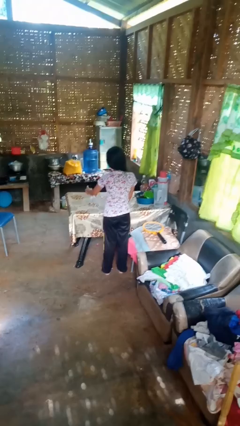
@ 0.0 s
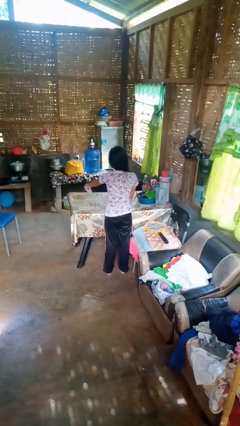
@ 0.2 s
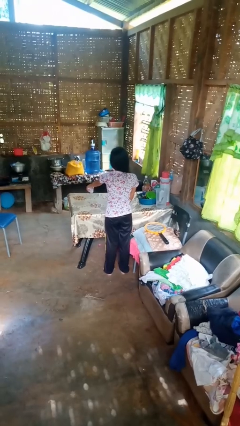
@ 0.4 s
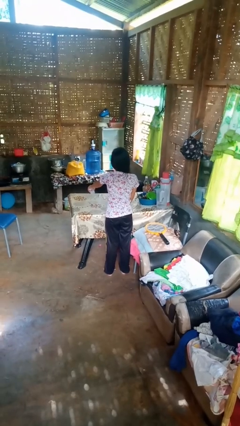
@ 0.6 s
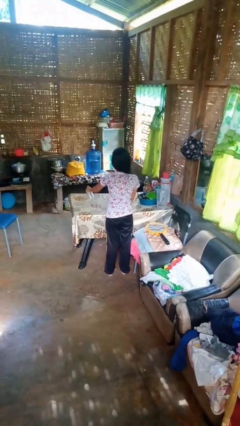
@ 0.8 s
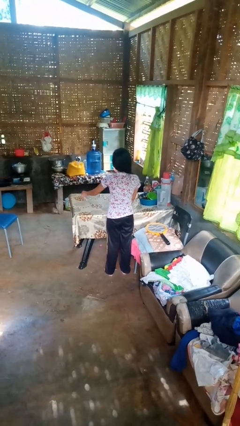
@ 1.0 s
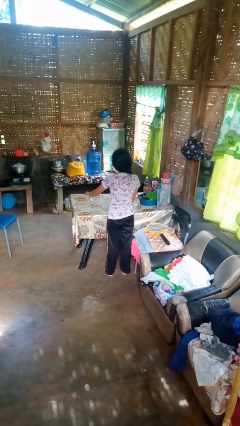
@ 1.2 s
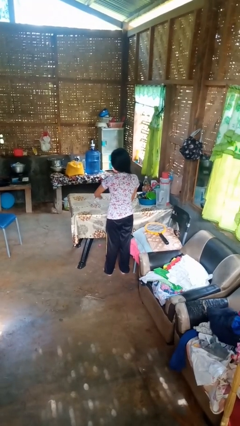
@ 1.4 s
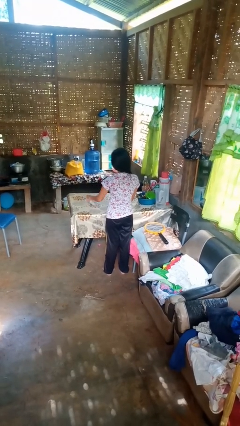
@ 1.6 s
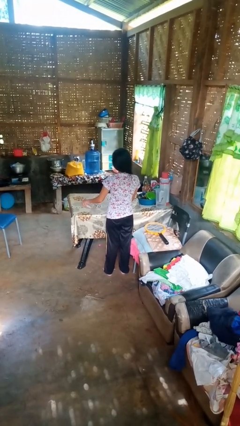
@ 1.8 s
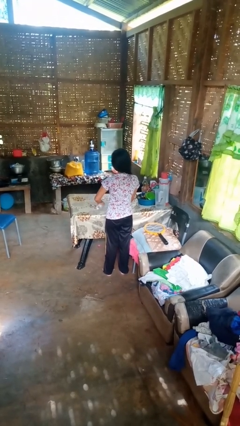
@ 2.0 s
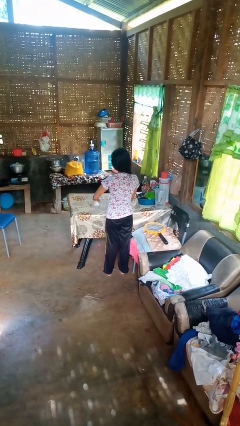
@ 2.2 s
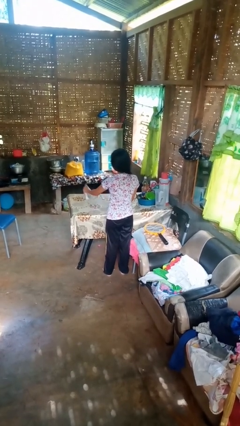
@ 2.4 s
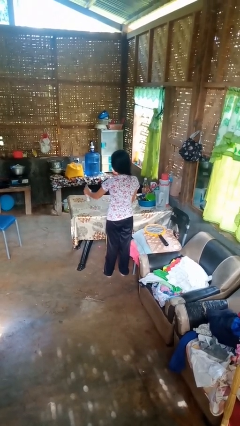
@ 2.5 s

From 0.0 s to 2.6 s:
person sprays from bottle

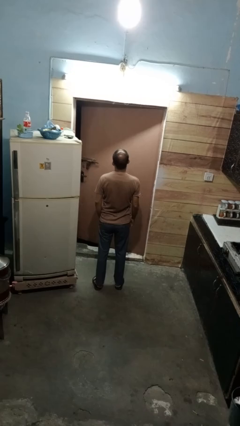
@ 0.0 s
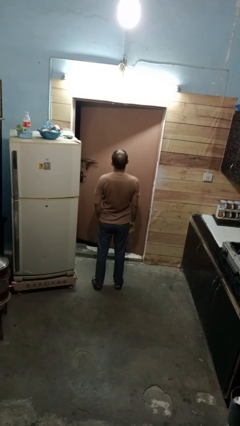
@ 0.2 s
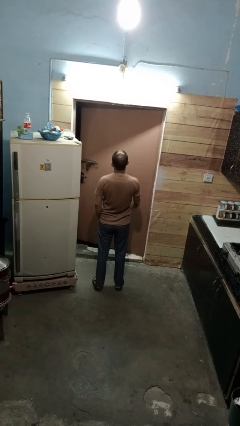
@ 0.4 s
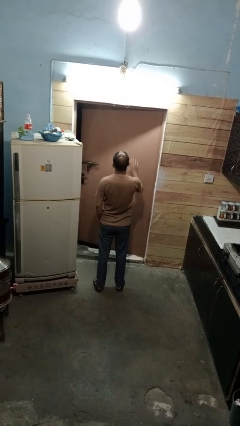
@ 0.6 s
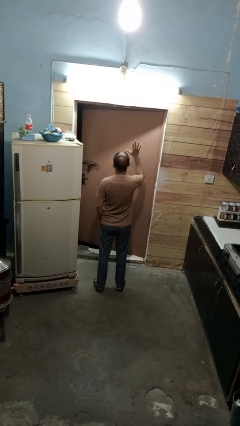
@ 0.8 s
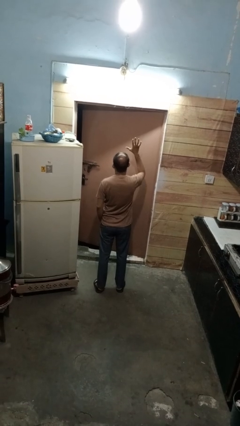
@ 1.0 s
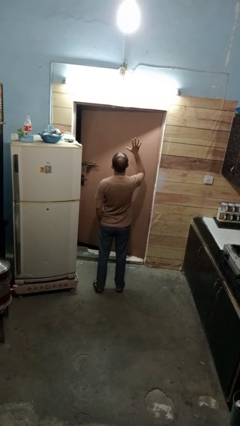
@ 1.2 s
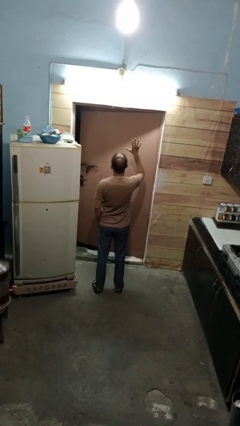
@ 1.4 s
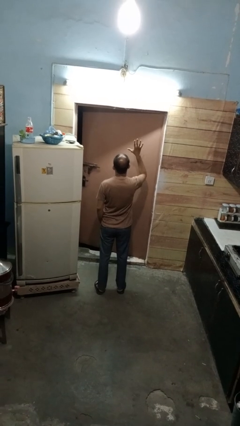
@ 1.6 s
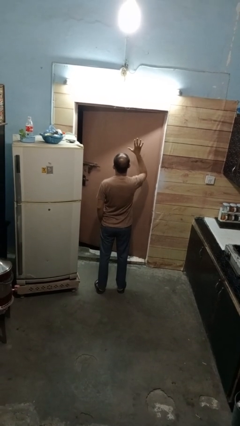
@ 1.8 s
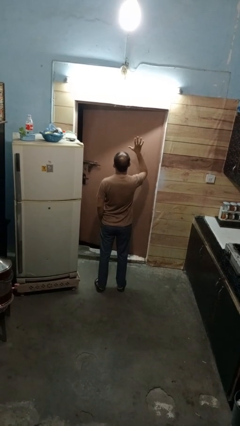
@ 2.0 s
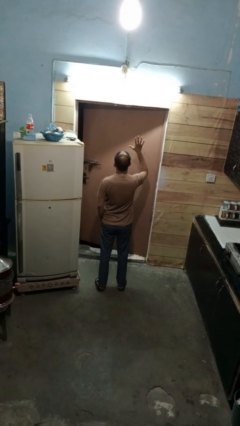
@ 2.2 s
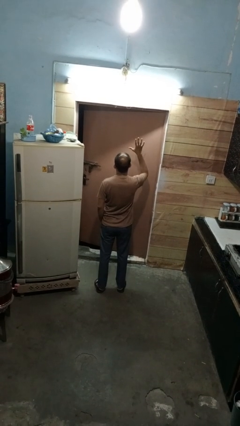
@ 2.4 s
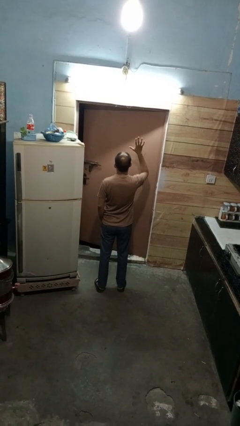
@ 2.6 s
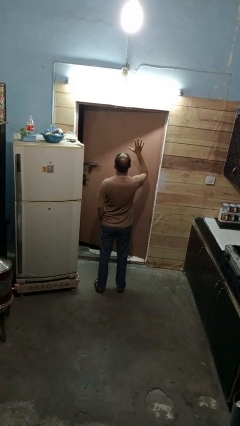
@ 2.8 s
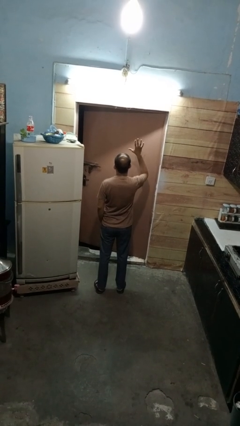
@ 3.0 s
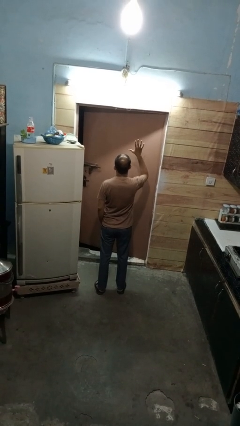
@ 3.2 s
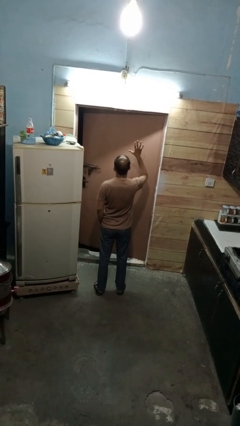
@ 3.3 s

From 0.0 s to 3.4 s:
person gestures number five

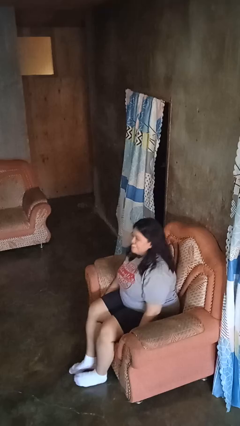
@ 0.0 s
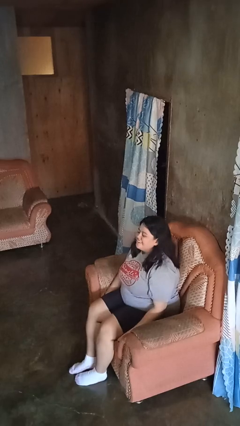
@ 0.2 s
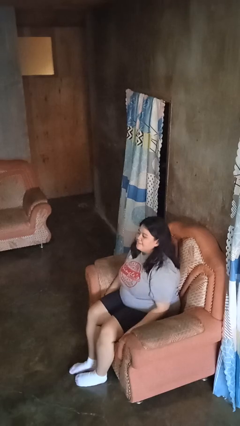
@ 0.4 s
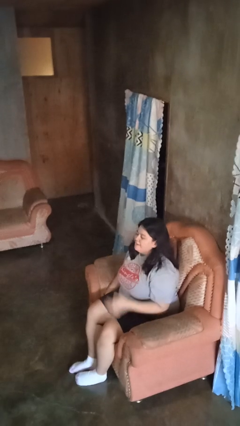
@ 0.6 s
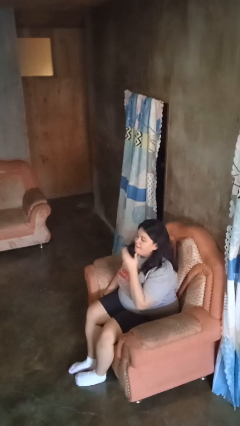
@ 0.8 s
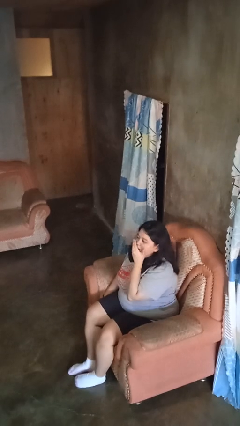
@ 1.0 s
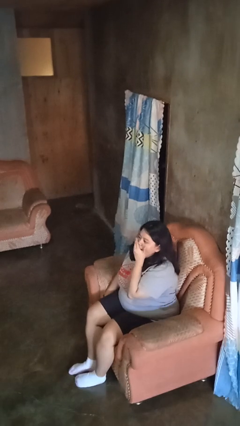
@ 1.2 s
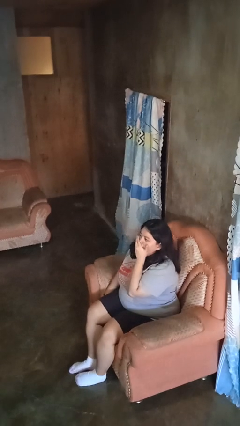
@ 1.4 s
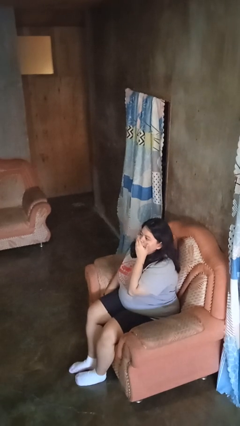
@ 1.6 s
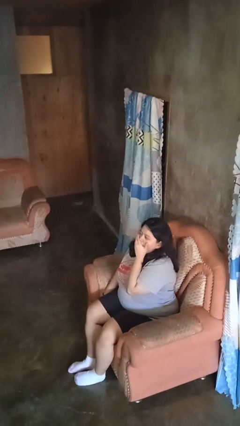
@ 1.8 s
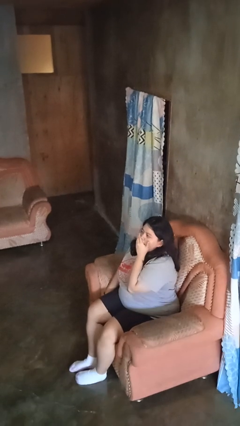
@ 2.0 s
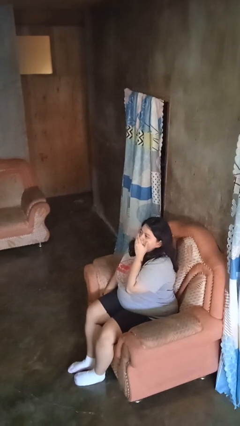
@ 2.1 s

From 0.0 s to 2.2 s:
person yawns

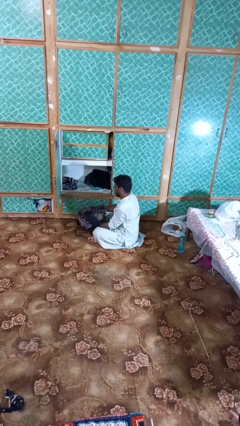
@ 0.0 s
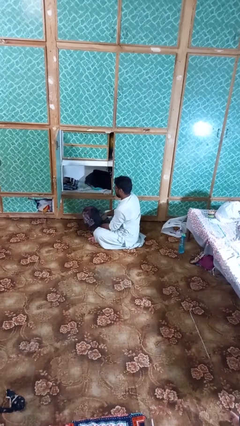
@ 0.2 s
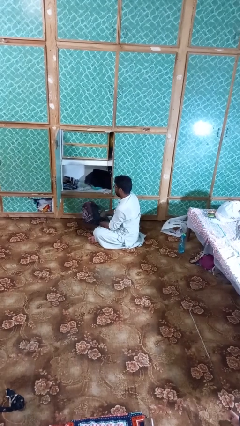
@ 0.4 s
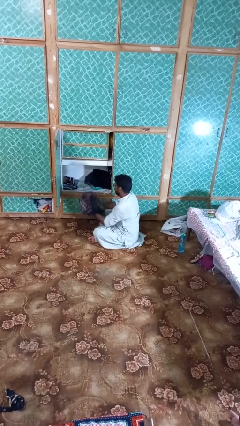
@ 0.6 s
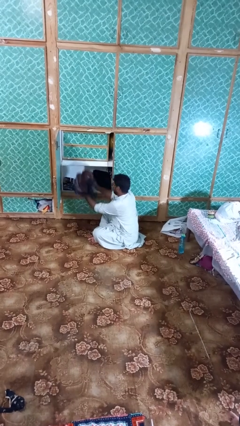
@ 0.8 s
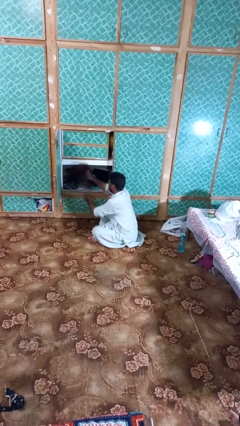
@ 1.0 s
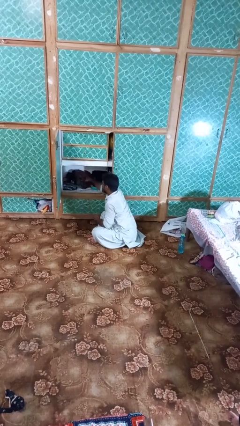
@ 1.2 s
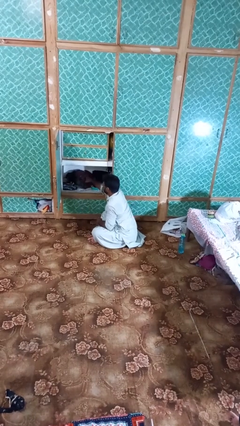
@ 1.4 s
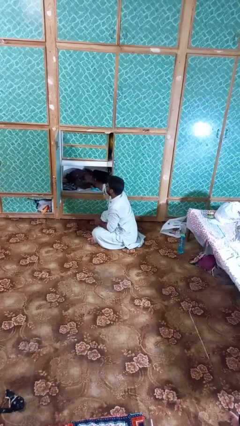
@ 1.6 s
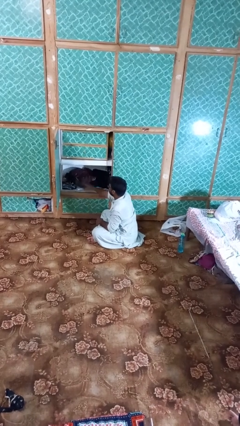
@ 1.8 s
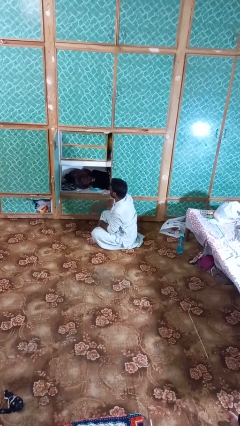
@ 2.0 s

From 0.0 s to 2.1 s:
person puts clothes into dresser

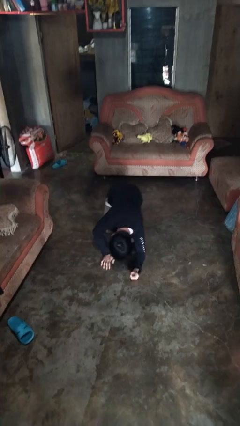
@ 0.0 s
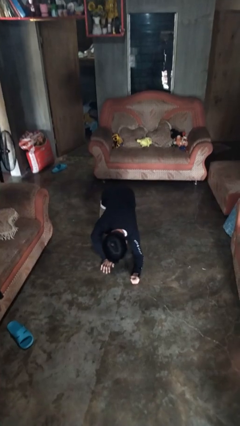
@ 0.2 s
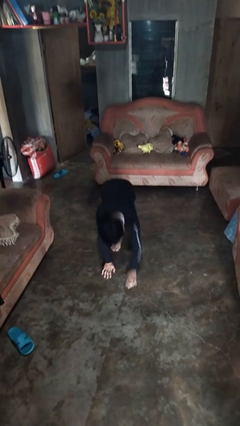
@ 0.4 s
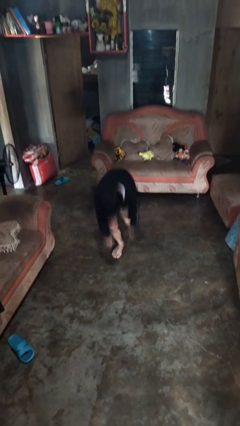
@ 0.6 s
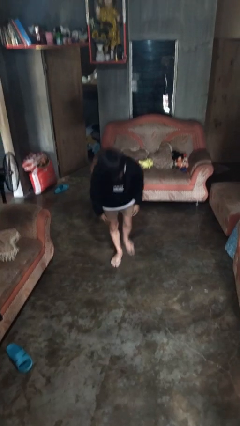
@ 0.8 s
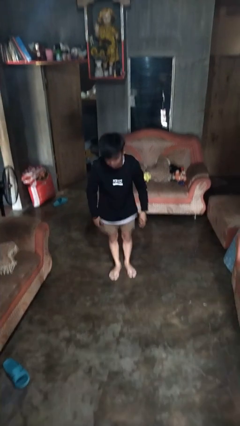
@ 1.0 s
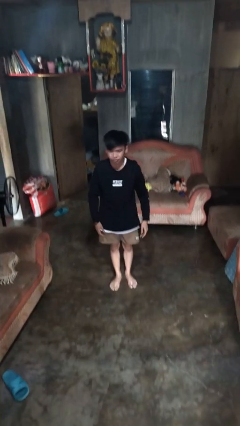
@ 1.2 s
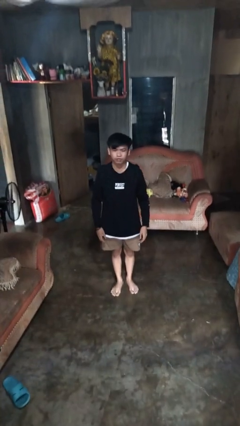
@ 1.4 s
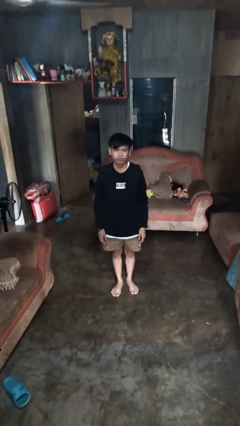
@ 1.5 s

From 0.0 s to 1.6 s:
person stands up from floor

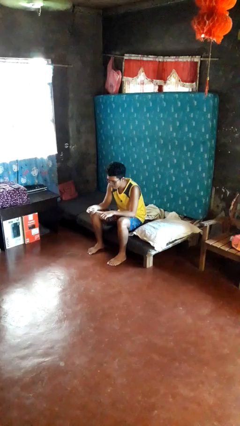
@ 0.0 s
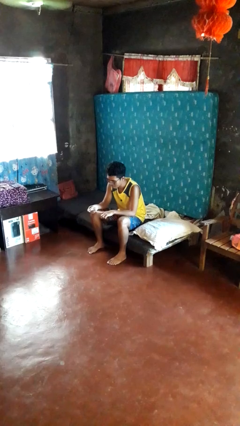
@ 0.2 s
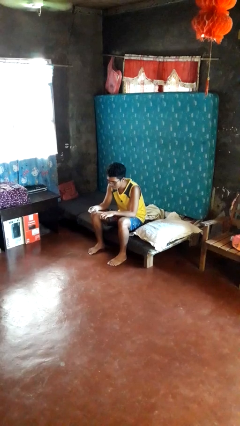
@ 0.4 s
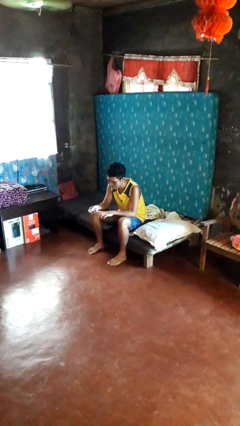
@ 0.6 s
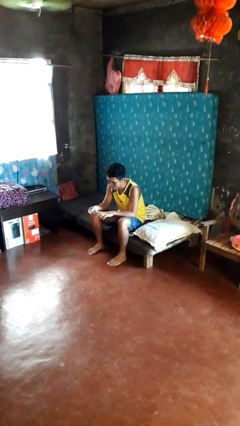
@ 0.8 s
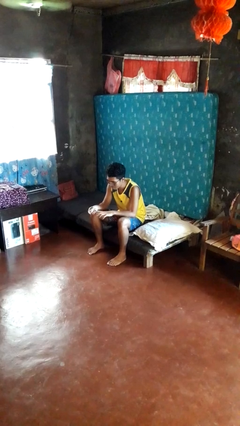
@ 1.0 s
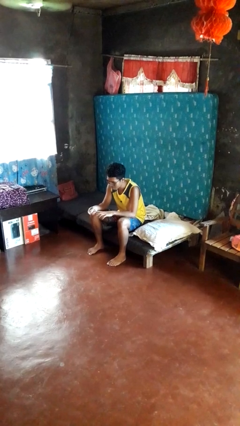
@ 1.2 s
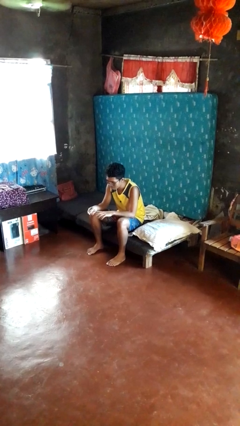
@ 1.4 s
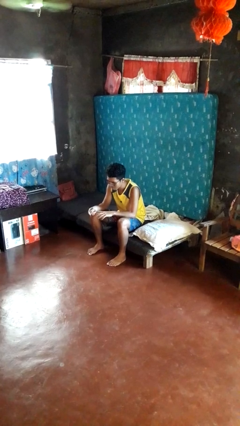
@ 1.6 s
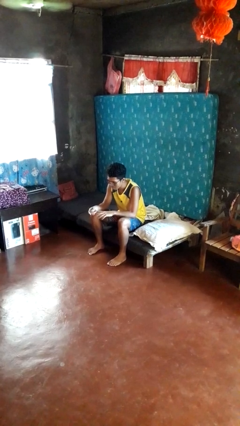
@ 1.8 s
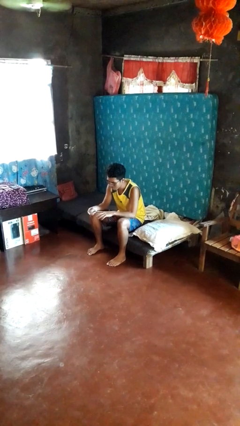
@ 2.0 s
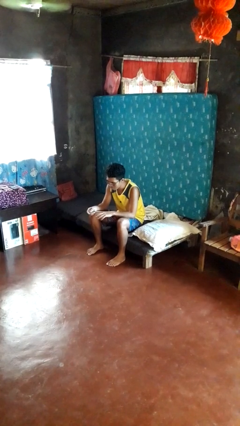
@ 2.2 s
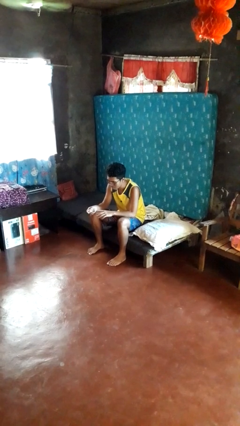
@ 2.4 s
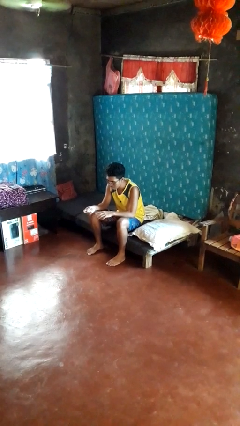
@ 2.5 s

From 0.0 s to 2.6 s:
person clips fingernails

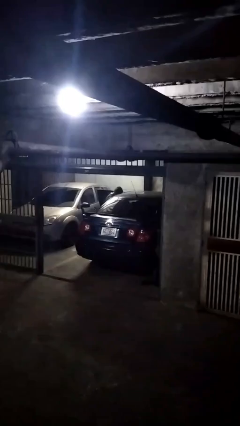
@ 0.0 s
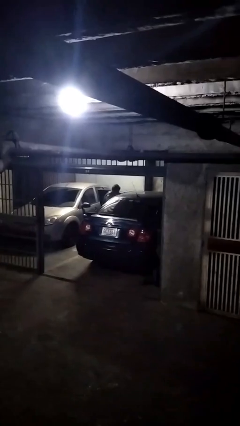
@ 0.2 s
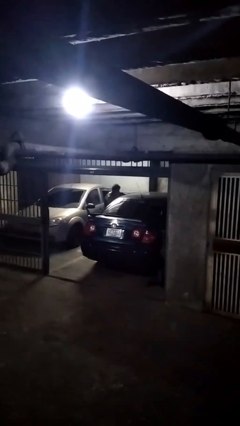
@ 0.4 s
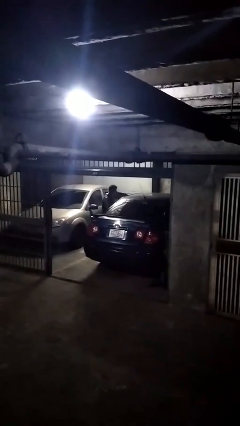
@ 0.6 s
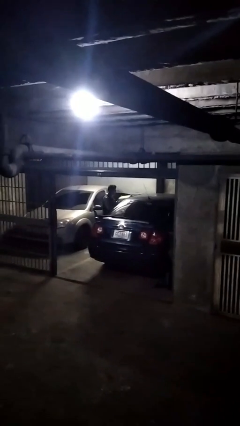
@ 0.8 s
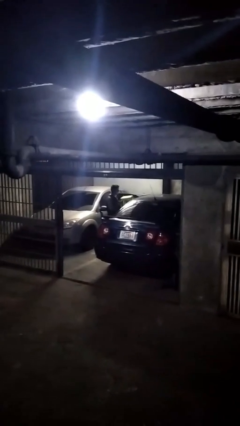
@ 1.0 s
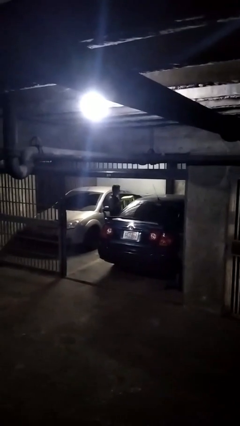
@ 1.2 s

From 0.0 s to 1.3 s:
person unloads car

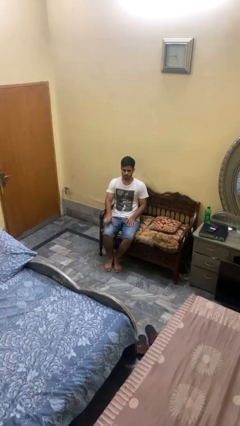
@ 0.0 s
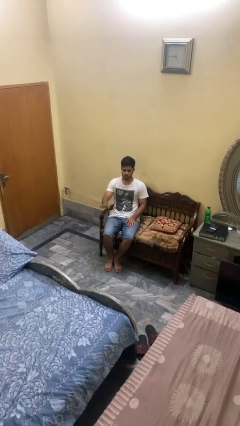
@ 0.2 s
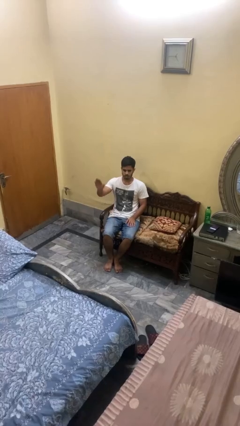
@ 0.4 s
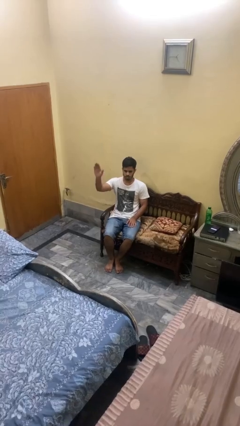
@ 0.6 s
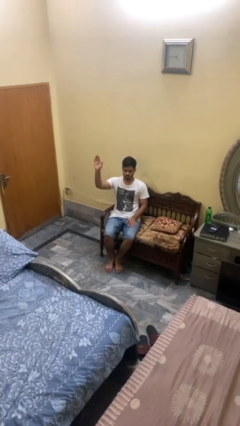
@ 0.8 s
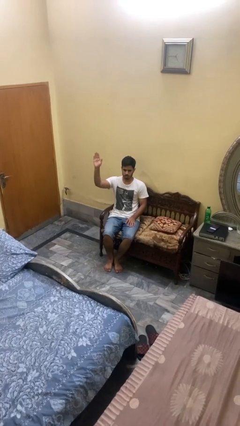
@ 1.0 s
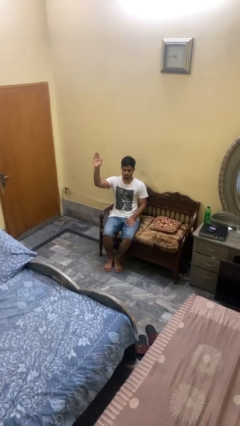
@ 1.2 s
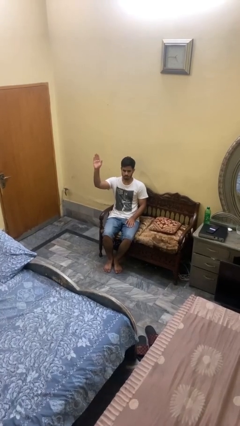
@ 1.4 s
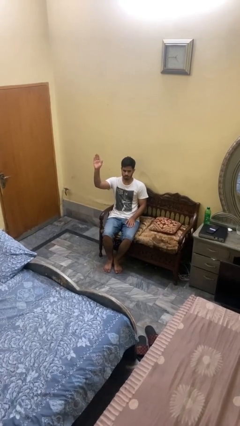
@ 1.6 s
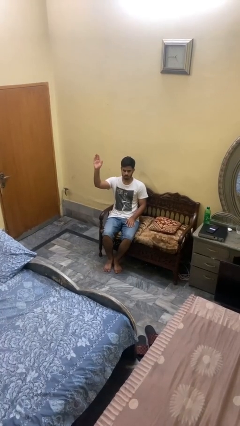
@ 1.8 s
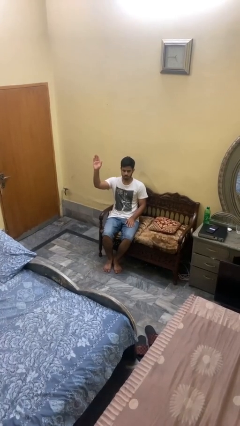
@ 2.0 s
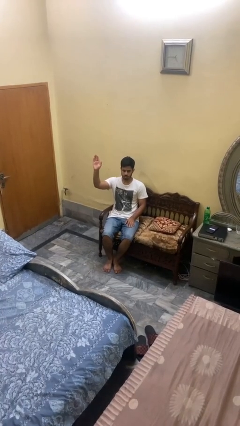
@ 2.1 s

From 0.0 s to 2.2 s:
person gestures raise hand
